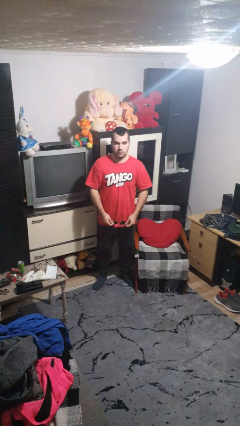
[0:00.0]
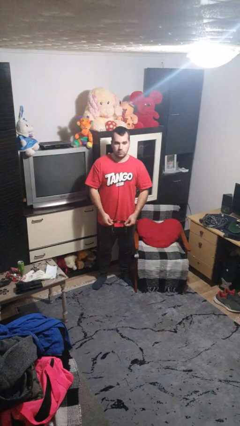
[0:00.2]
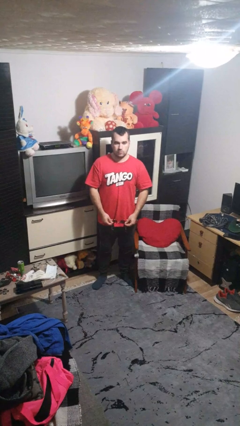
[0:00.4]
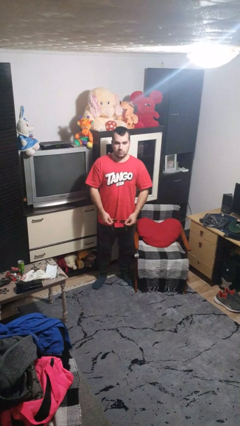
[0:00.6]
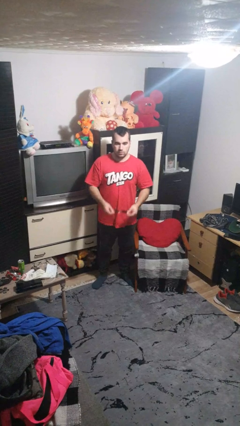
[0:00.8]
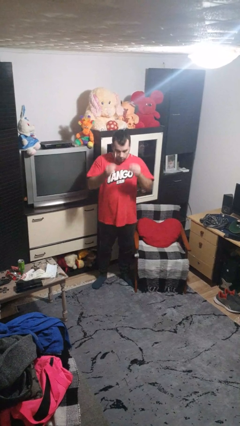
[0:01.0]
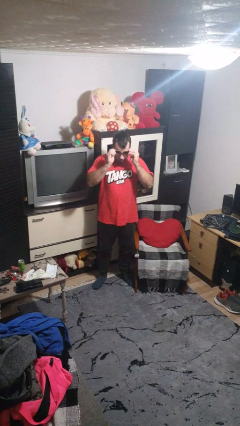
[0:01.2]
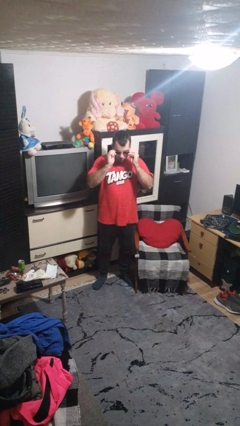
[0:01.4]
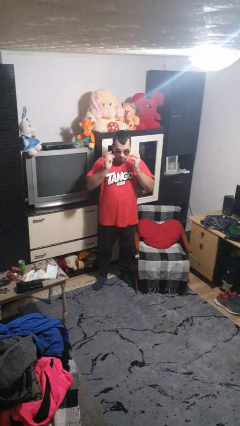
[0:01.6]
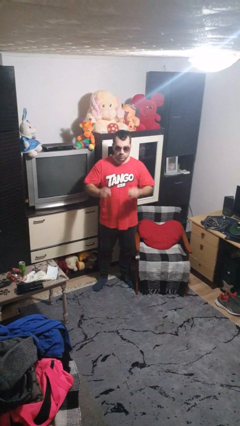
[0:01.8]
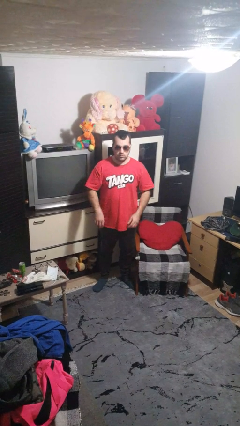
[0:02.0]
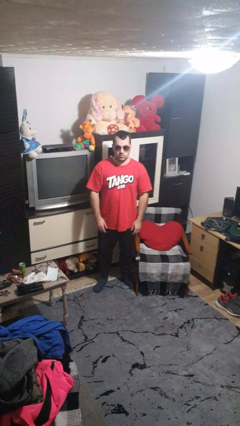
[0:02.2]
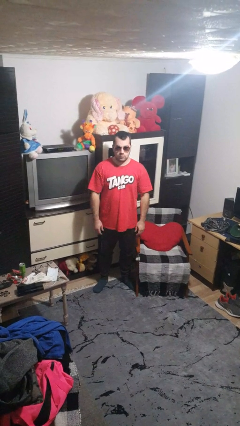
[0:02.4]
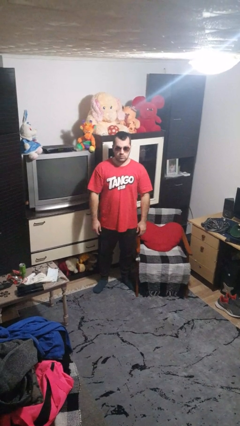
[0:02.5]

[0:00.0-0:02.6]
person puts on sunglasses

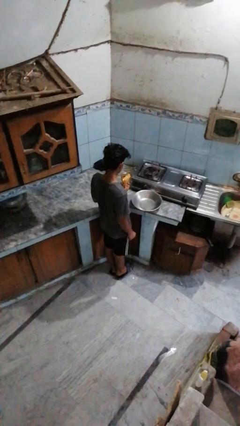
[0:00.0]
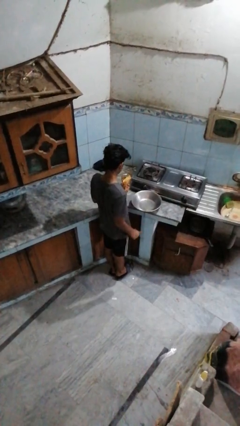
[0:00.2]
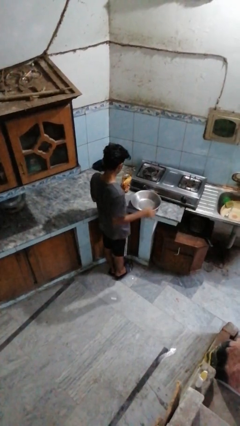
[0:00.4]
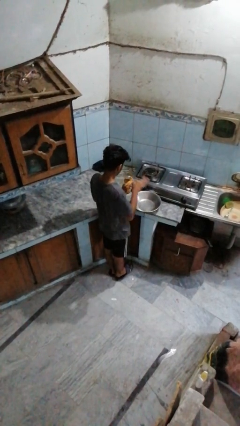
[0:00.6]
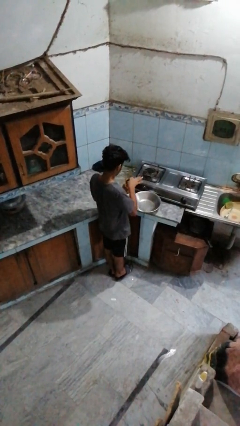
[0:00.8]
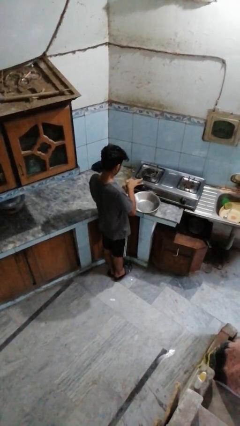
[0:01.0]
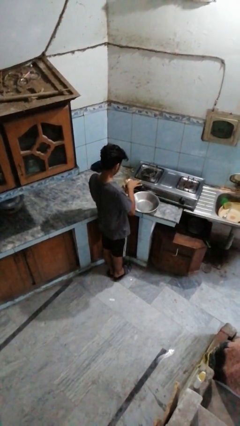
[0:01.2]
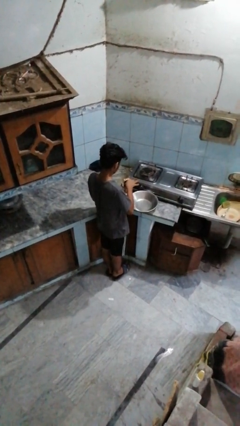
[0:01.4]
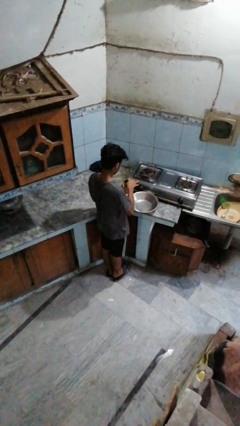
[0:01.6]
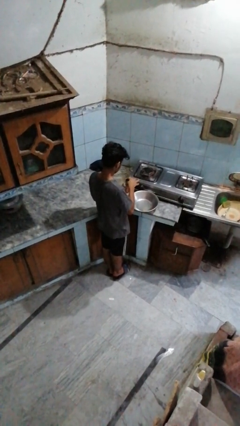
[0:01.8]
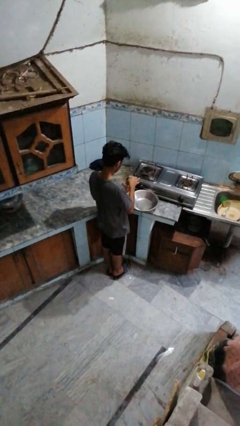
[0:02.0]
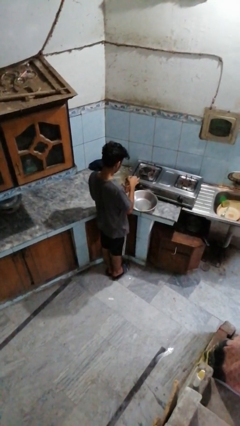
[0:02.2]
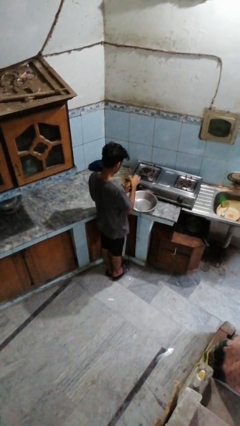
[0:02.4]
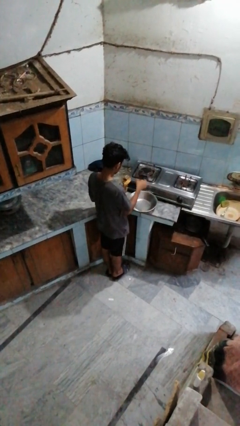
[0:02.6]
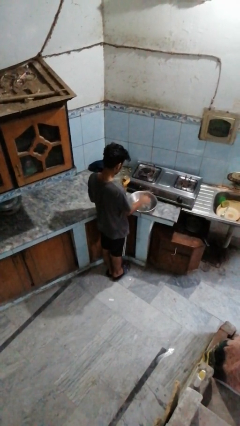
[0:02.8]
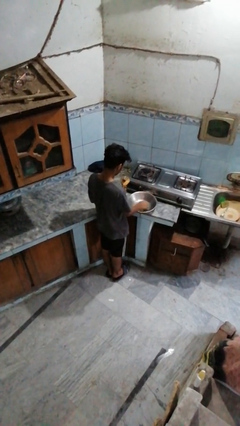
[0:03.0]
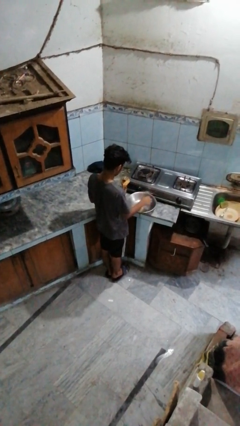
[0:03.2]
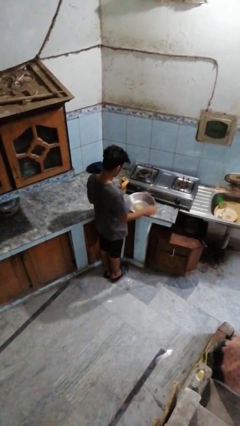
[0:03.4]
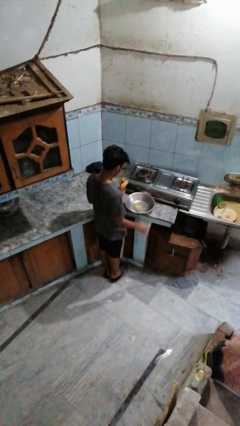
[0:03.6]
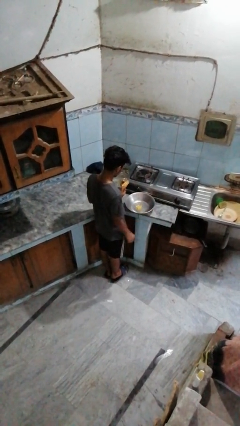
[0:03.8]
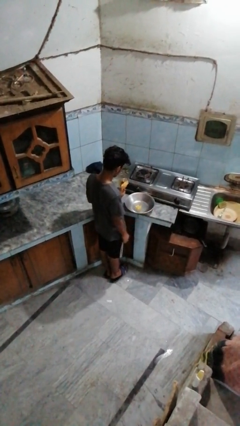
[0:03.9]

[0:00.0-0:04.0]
person pours into bowl

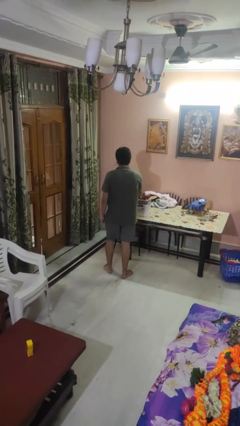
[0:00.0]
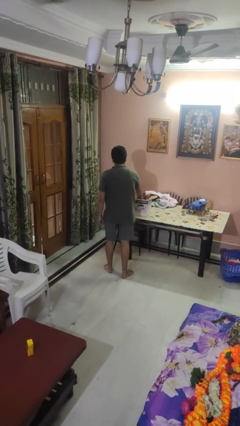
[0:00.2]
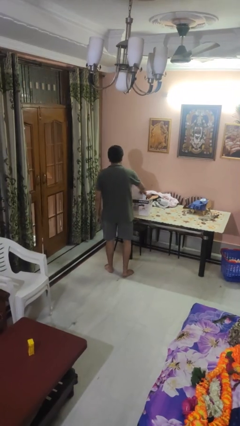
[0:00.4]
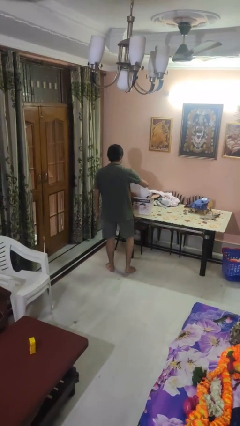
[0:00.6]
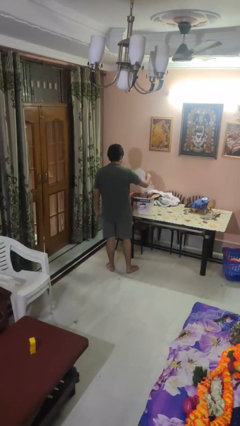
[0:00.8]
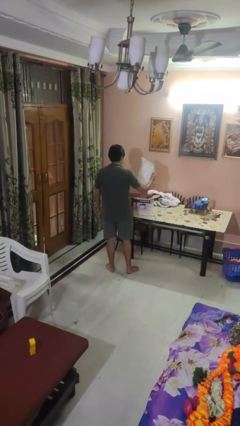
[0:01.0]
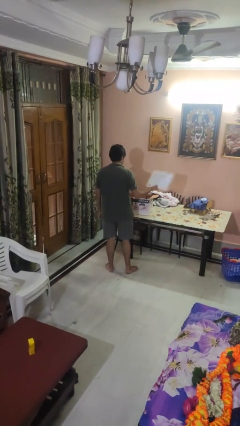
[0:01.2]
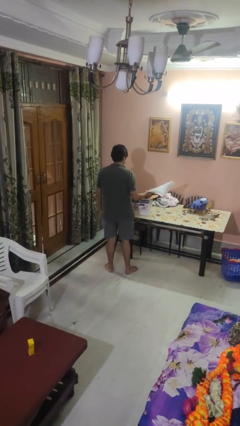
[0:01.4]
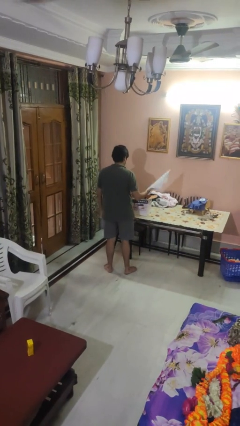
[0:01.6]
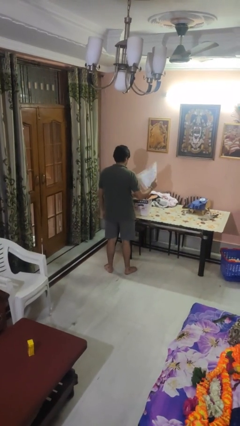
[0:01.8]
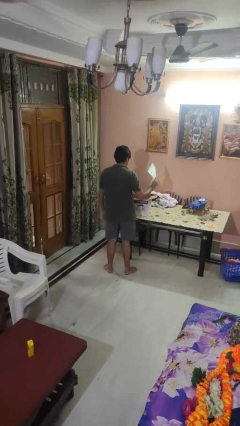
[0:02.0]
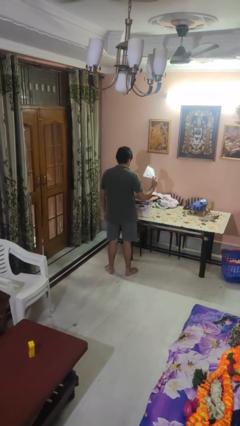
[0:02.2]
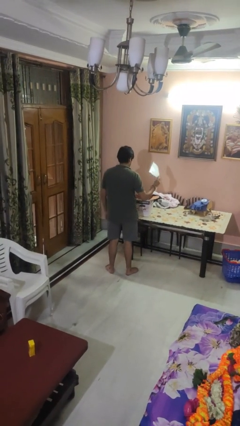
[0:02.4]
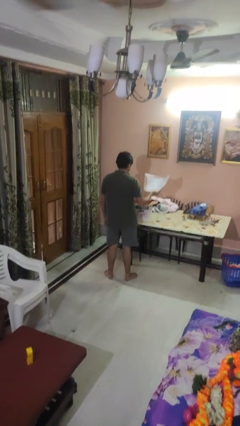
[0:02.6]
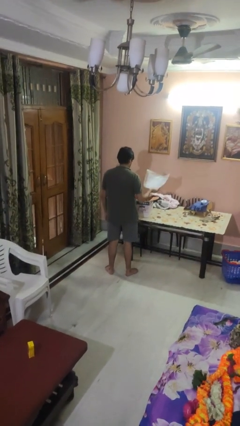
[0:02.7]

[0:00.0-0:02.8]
person takes object from box

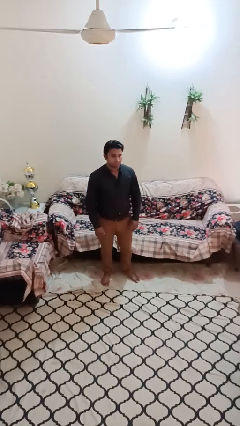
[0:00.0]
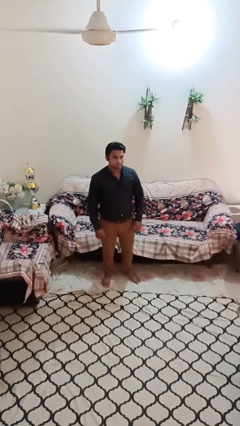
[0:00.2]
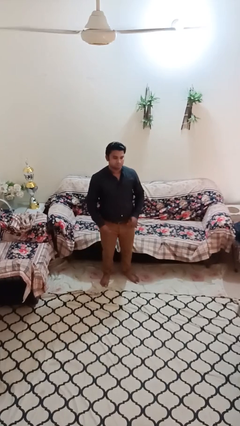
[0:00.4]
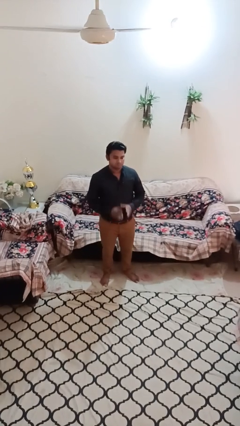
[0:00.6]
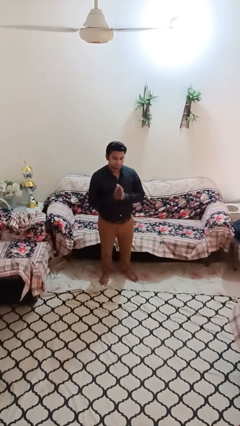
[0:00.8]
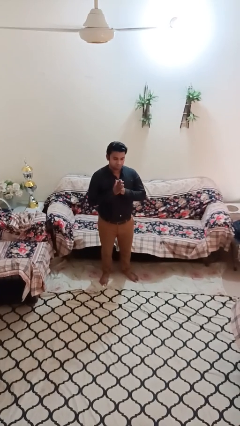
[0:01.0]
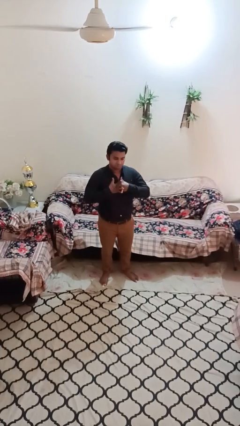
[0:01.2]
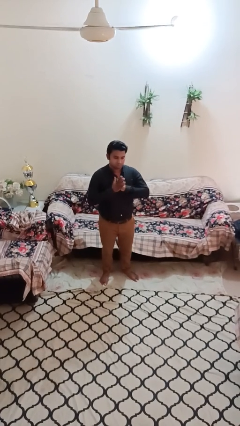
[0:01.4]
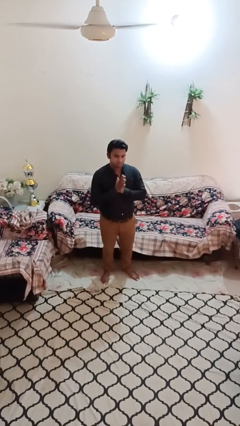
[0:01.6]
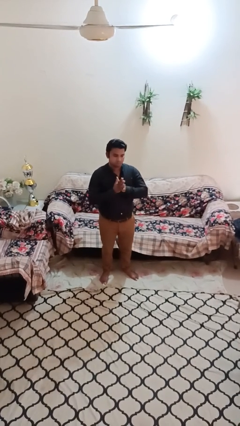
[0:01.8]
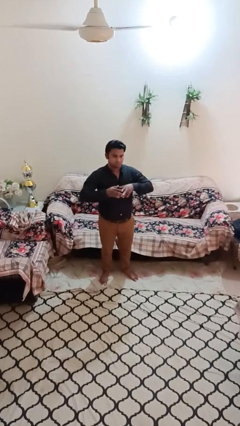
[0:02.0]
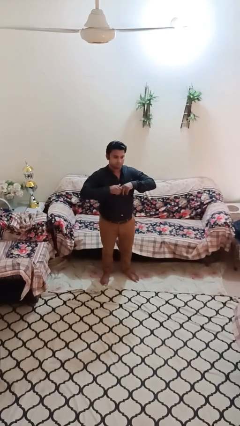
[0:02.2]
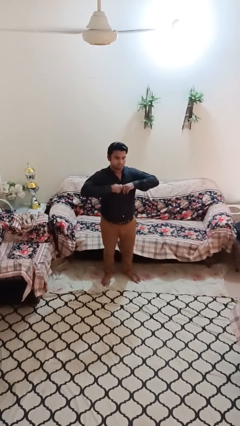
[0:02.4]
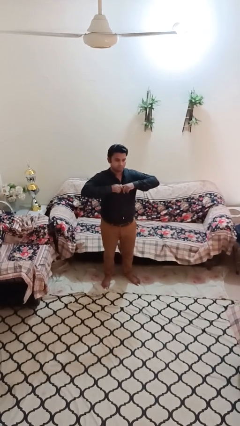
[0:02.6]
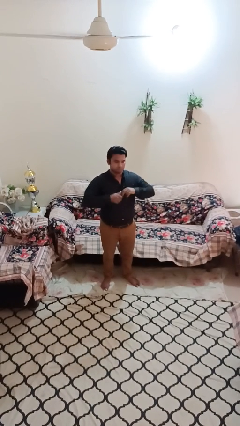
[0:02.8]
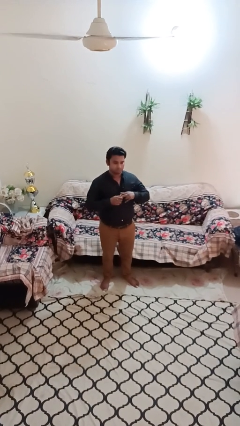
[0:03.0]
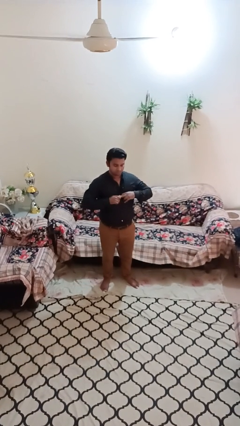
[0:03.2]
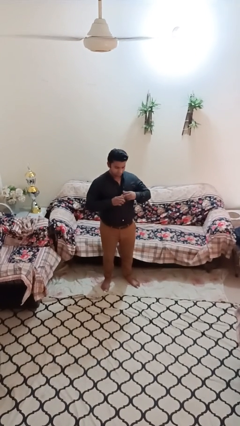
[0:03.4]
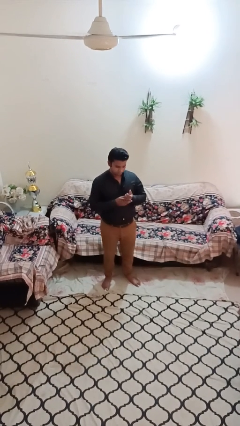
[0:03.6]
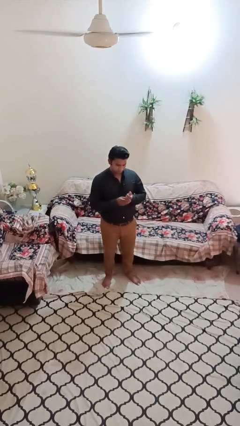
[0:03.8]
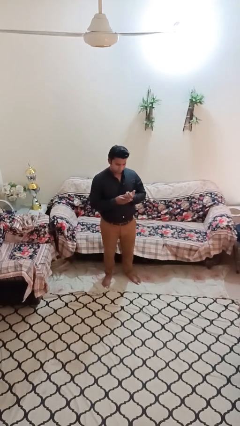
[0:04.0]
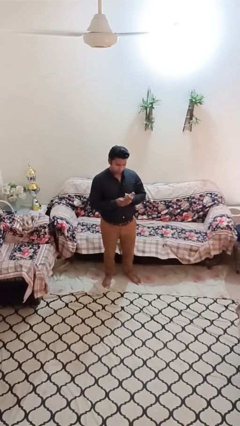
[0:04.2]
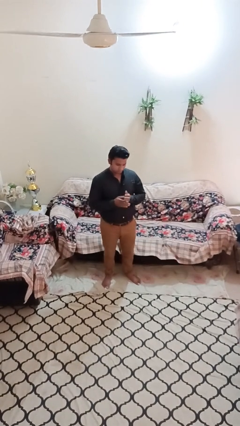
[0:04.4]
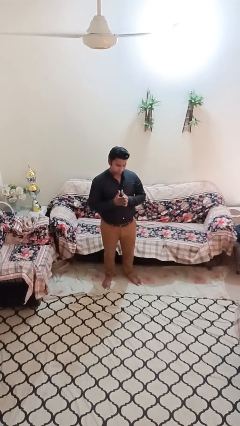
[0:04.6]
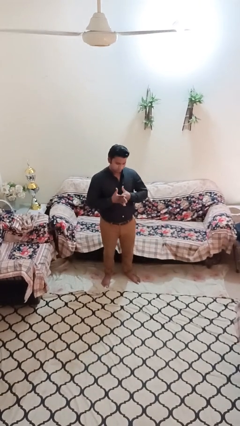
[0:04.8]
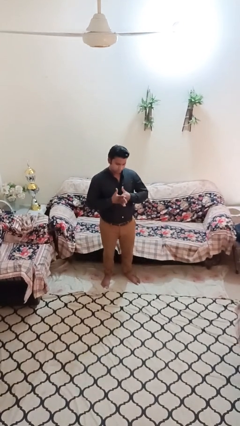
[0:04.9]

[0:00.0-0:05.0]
person cracks knuckles

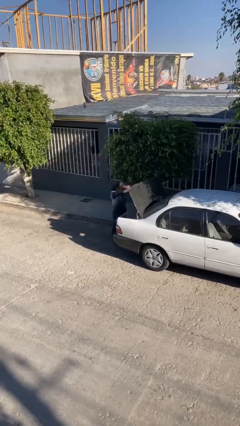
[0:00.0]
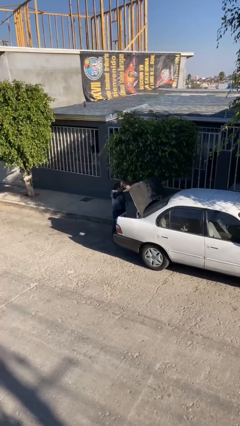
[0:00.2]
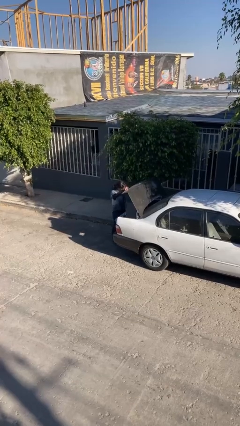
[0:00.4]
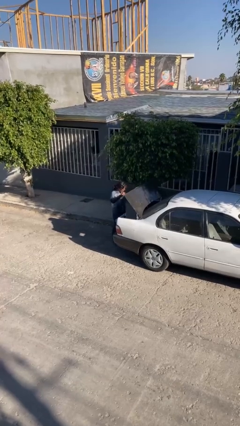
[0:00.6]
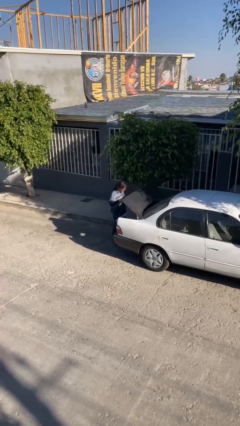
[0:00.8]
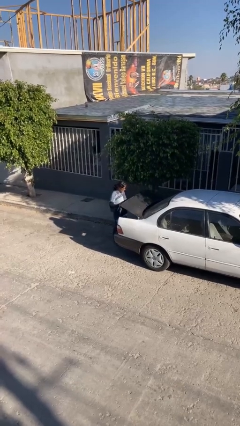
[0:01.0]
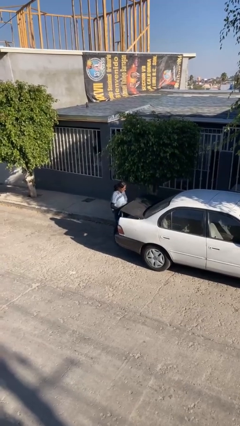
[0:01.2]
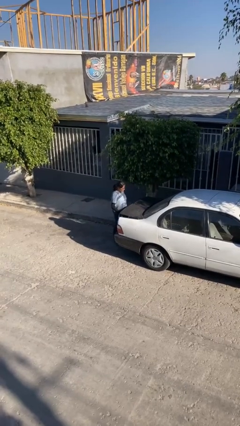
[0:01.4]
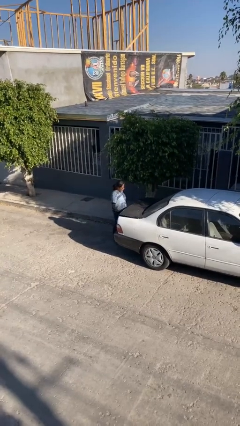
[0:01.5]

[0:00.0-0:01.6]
person closes car trunk

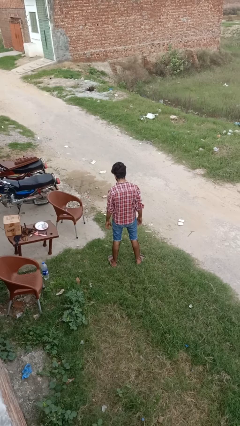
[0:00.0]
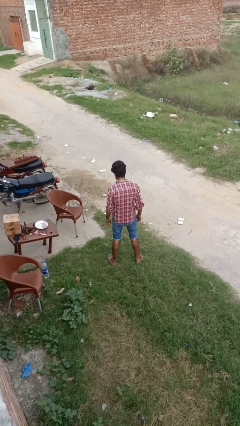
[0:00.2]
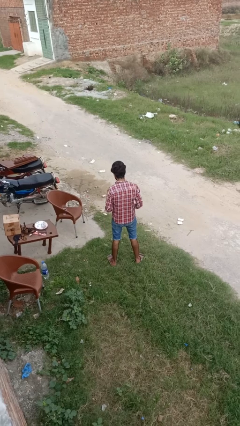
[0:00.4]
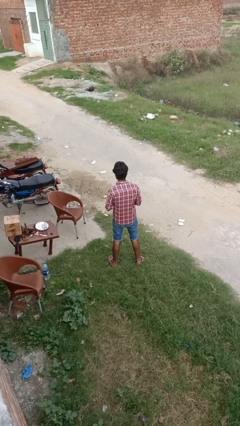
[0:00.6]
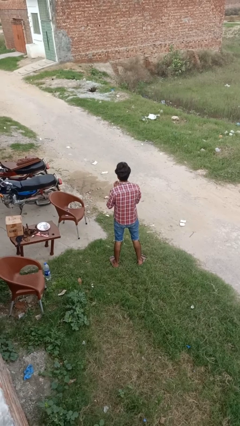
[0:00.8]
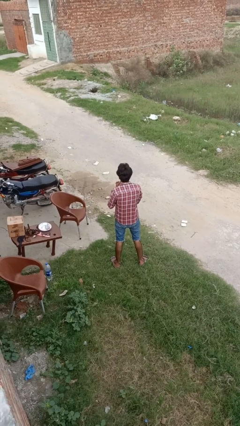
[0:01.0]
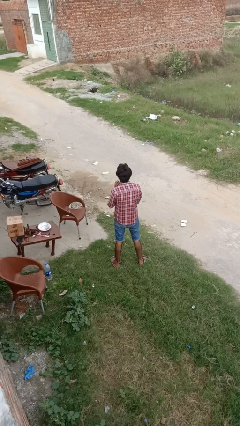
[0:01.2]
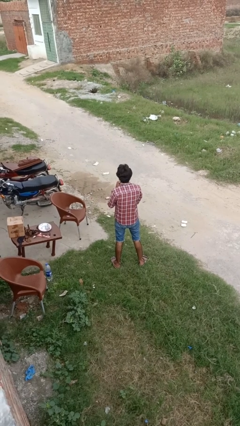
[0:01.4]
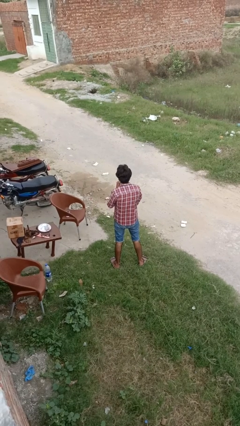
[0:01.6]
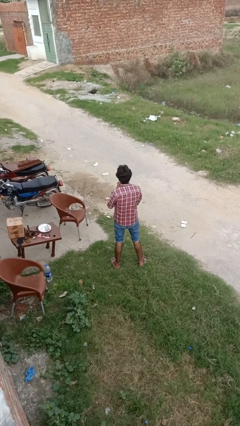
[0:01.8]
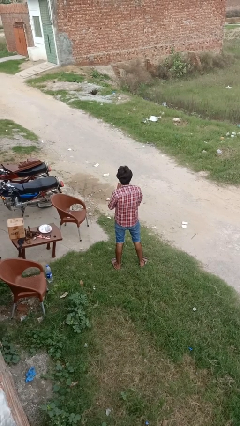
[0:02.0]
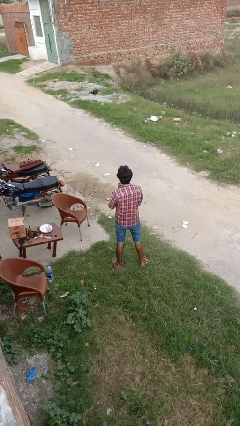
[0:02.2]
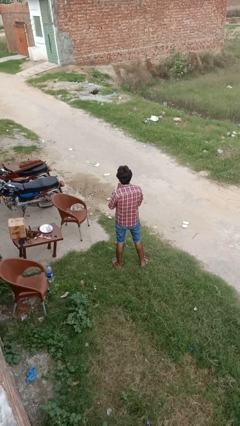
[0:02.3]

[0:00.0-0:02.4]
person puts on ring
